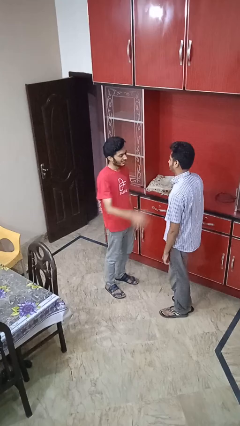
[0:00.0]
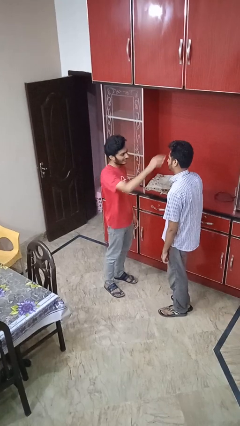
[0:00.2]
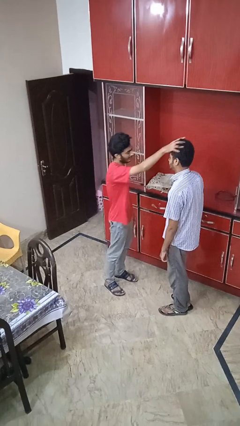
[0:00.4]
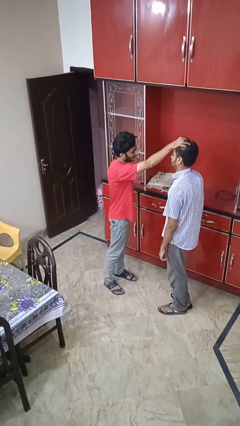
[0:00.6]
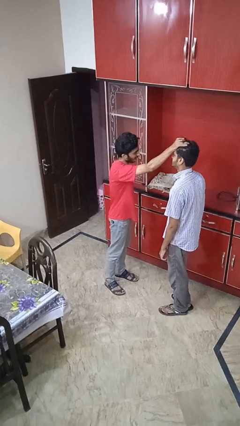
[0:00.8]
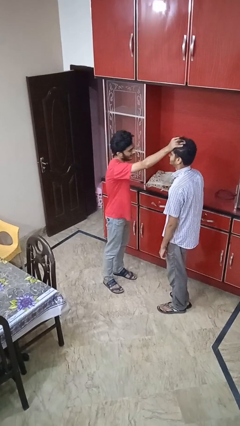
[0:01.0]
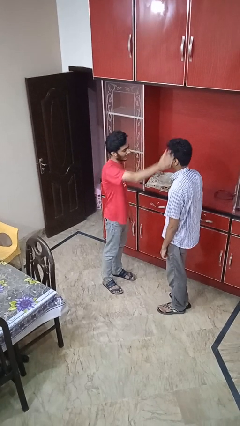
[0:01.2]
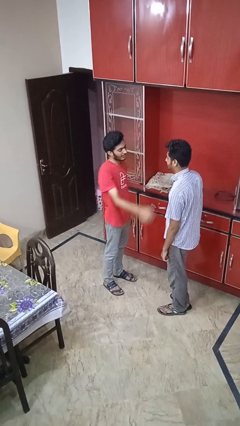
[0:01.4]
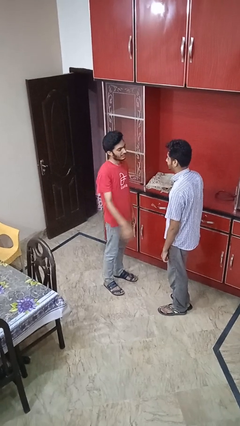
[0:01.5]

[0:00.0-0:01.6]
person grabs person by hair

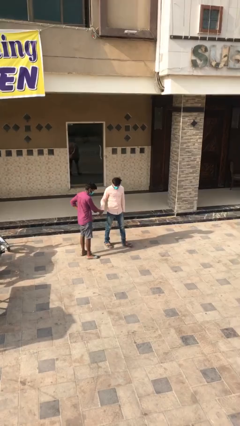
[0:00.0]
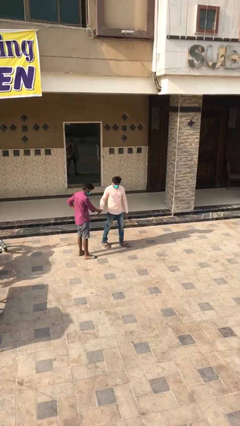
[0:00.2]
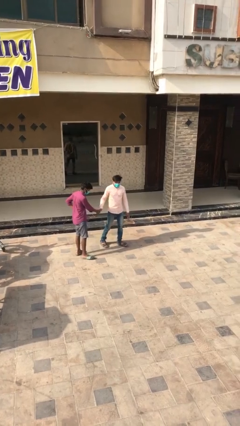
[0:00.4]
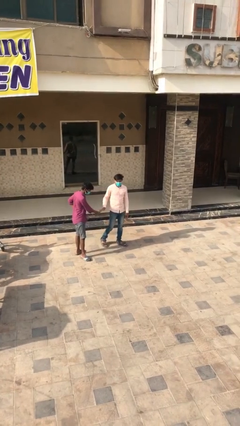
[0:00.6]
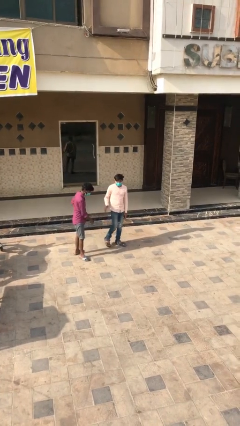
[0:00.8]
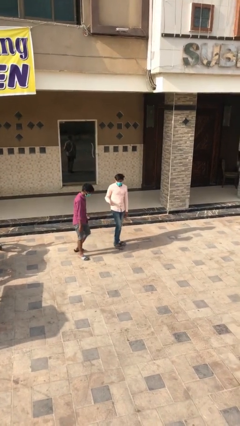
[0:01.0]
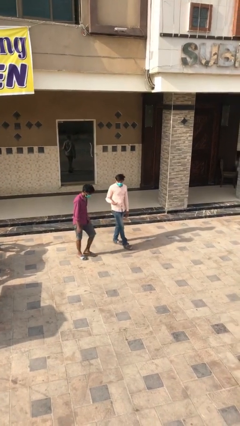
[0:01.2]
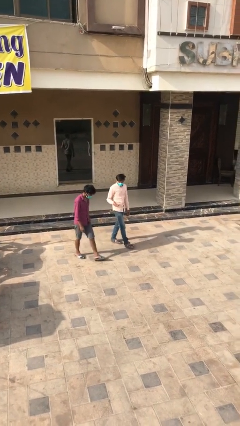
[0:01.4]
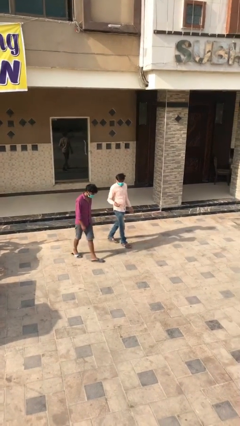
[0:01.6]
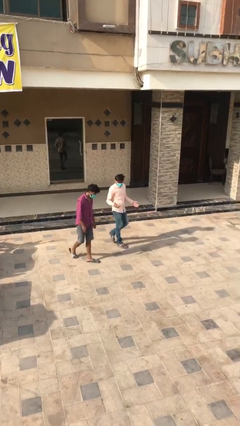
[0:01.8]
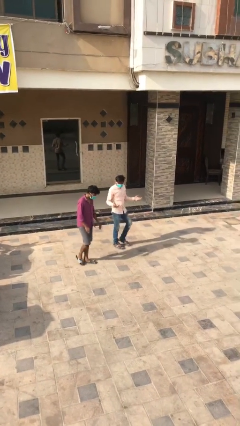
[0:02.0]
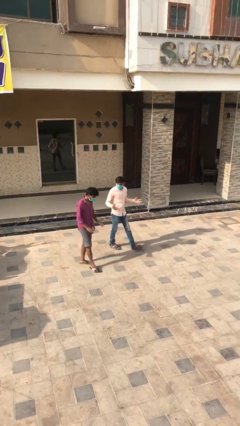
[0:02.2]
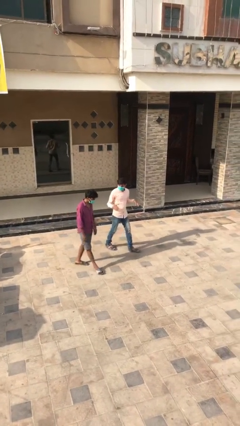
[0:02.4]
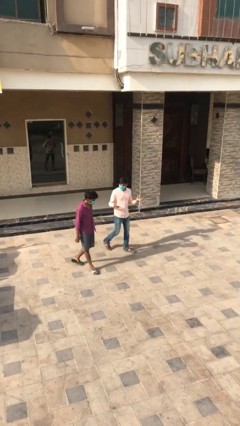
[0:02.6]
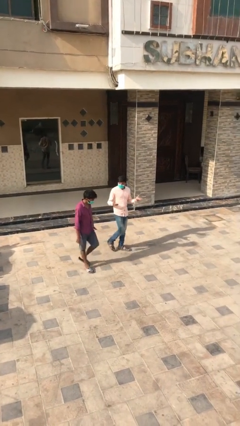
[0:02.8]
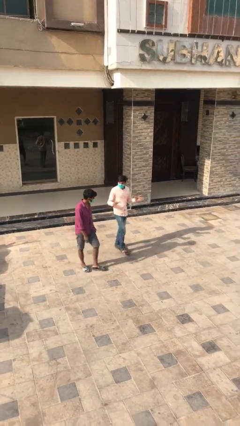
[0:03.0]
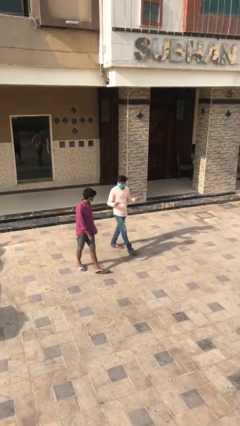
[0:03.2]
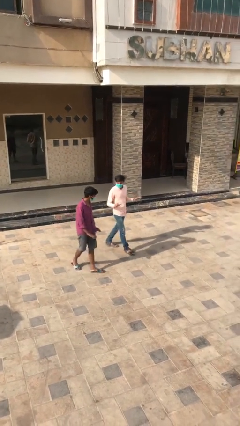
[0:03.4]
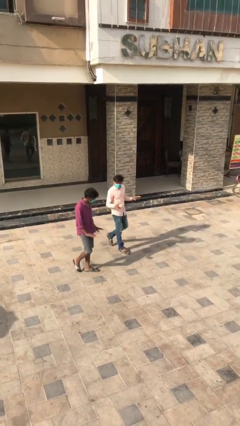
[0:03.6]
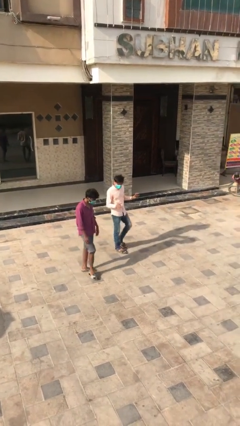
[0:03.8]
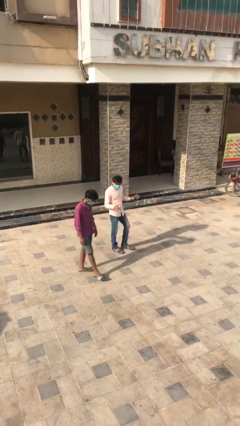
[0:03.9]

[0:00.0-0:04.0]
person talks to person

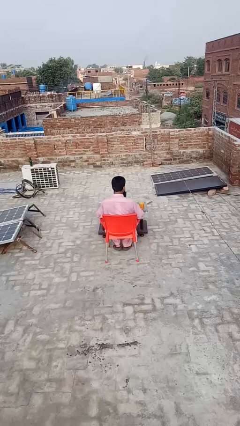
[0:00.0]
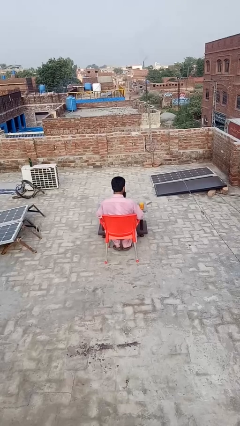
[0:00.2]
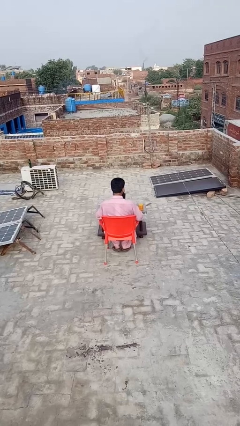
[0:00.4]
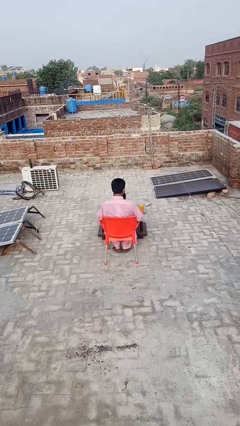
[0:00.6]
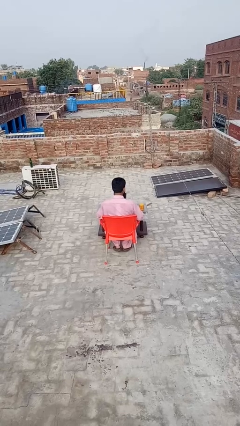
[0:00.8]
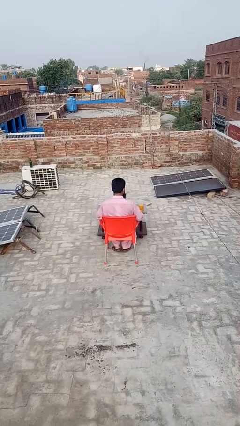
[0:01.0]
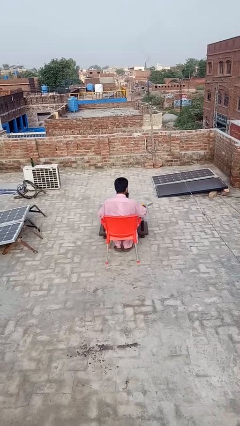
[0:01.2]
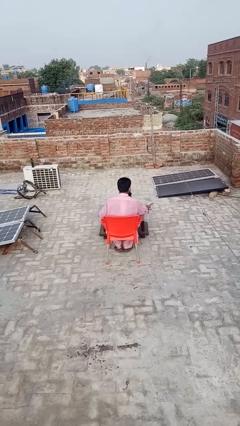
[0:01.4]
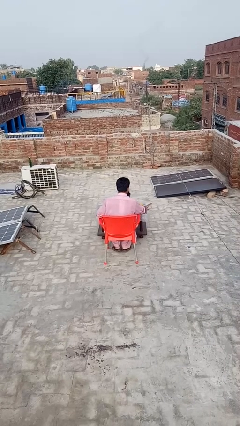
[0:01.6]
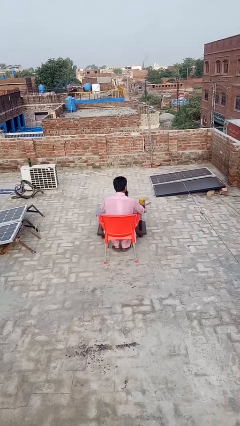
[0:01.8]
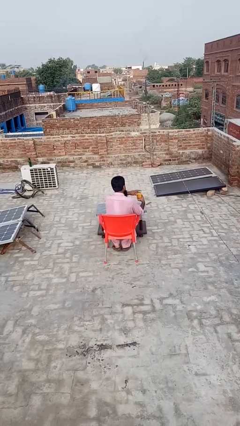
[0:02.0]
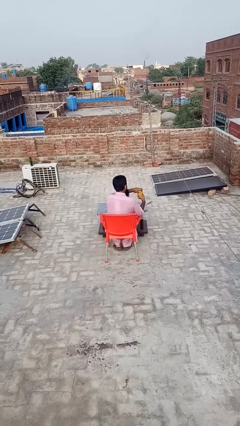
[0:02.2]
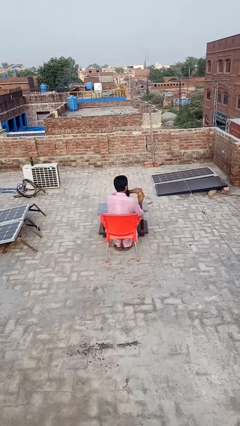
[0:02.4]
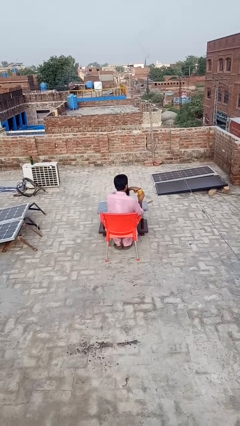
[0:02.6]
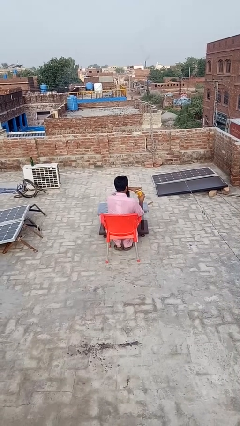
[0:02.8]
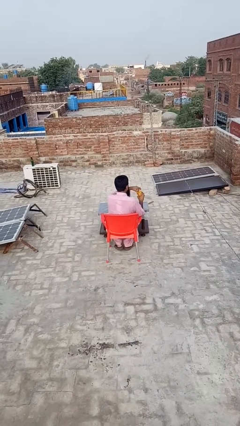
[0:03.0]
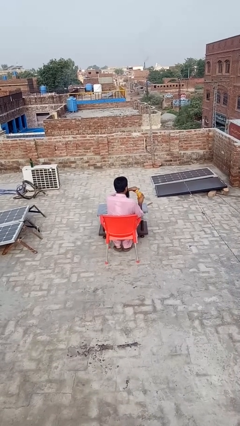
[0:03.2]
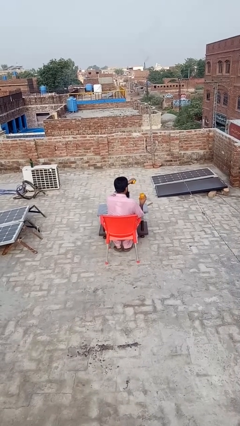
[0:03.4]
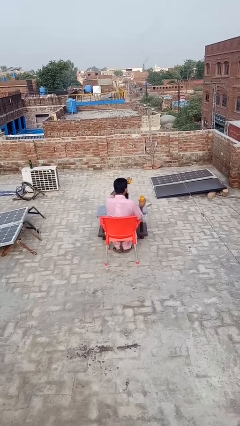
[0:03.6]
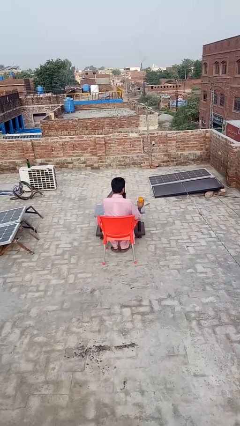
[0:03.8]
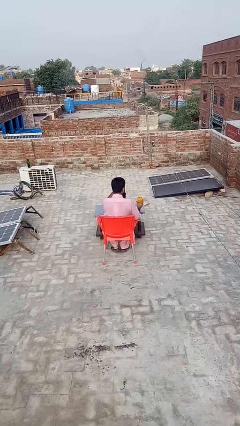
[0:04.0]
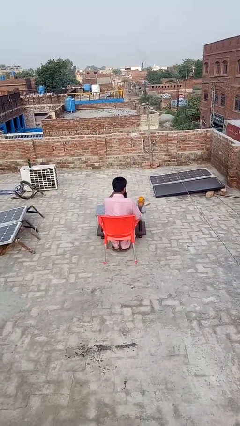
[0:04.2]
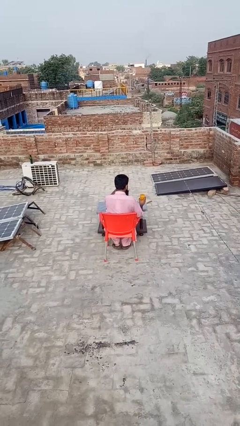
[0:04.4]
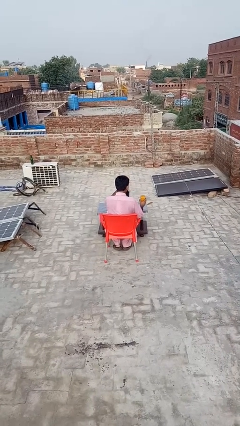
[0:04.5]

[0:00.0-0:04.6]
person opens jar

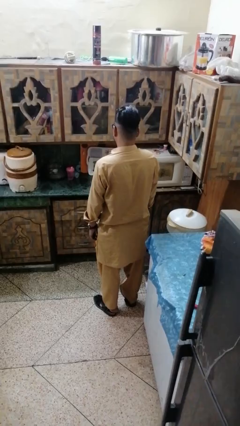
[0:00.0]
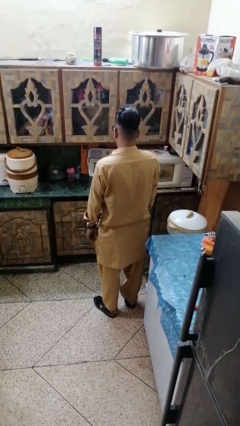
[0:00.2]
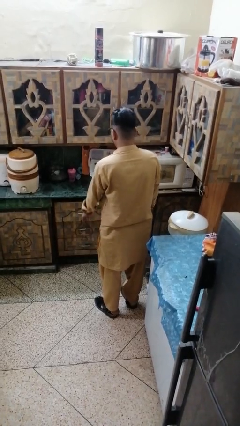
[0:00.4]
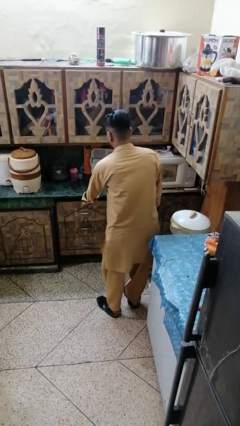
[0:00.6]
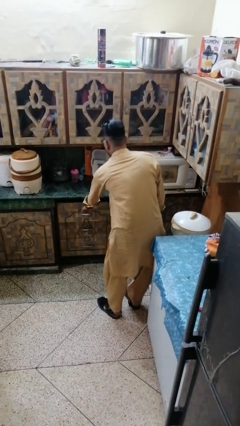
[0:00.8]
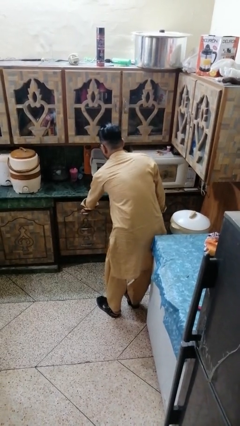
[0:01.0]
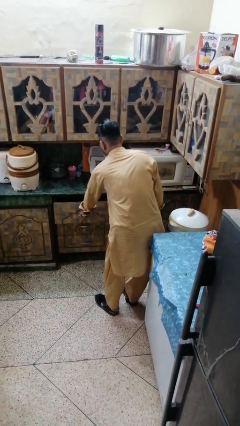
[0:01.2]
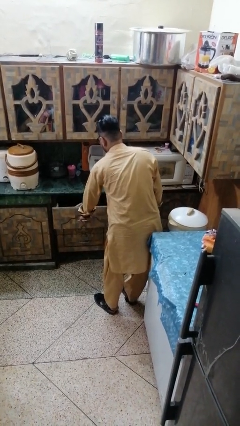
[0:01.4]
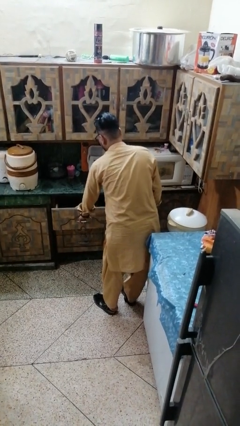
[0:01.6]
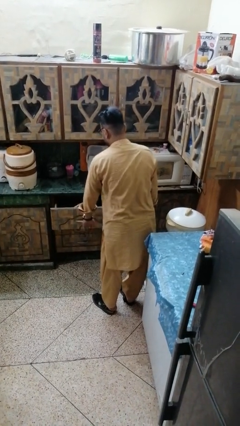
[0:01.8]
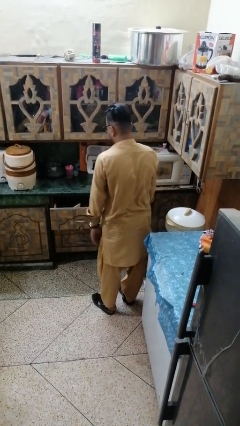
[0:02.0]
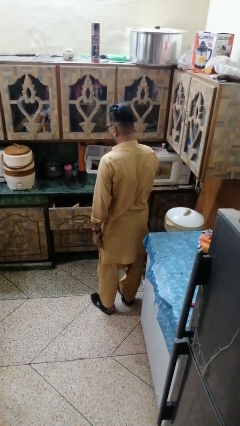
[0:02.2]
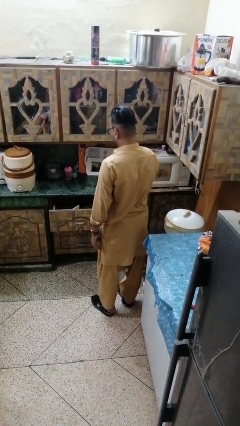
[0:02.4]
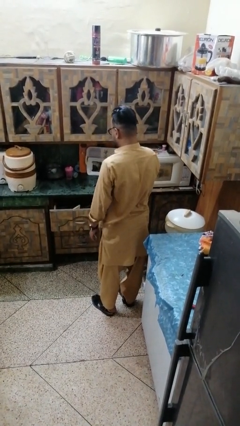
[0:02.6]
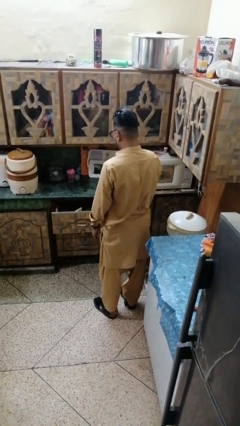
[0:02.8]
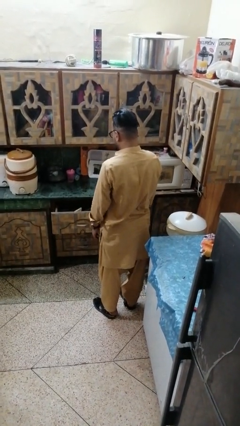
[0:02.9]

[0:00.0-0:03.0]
person opens kitchen drawer

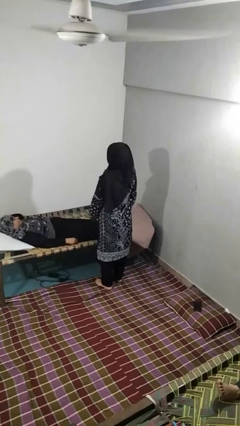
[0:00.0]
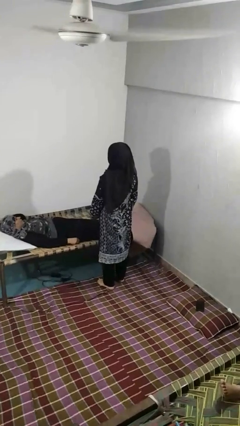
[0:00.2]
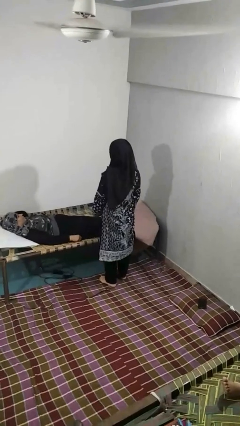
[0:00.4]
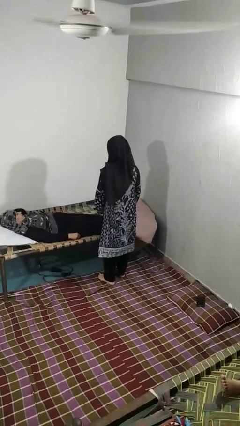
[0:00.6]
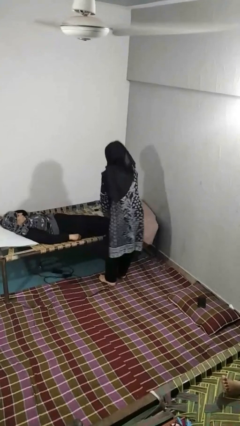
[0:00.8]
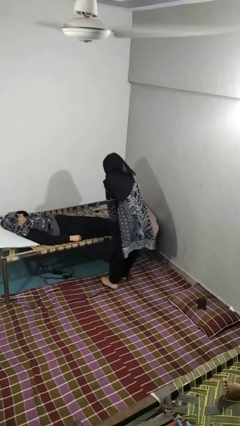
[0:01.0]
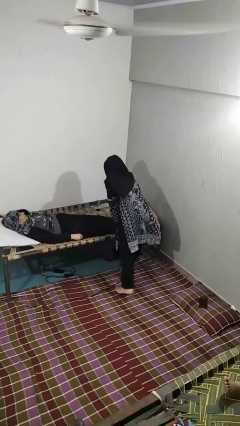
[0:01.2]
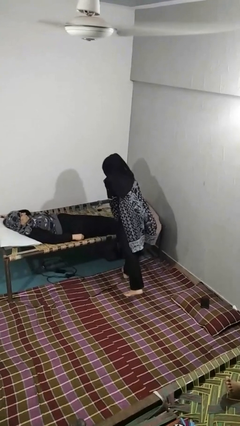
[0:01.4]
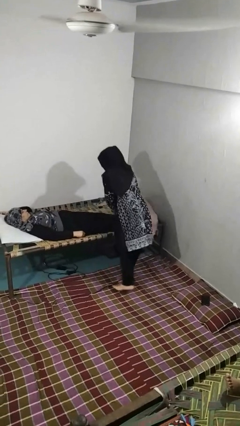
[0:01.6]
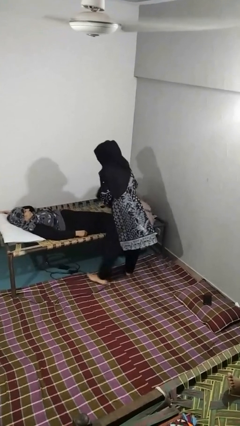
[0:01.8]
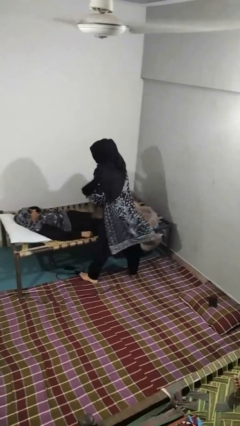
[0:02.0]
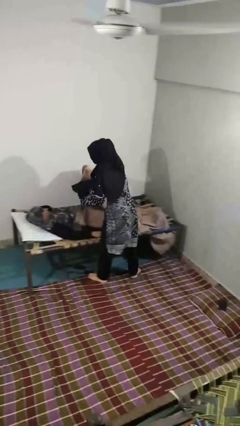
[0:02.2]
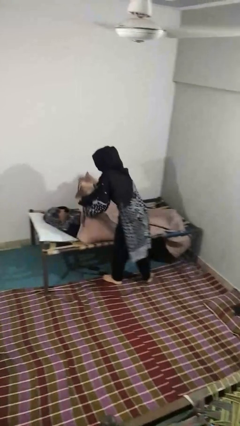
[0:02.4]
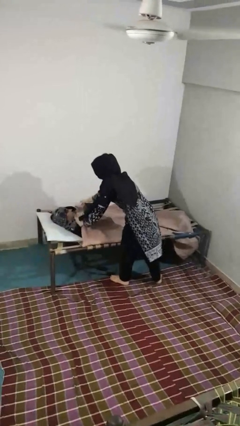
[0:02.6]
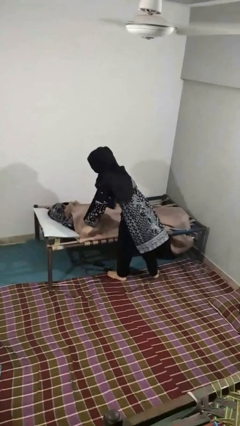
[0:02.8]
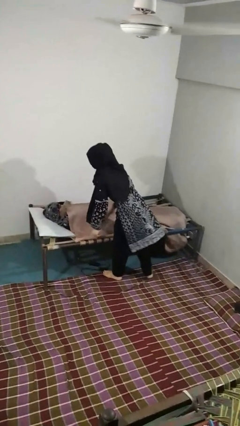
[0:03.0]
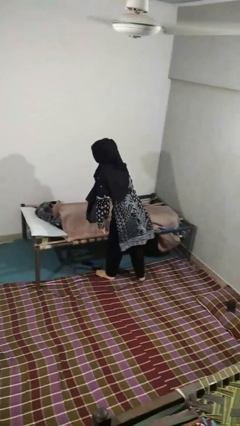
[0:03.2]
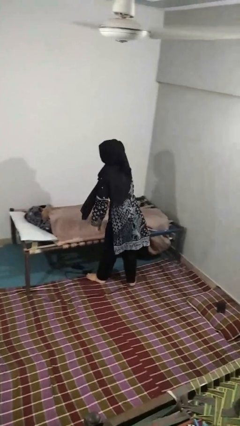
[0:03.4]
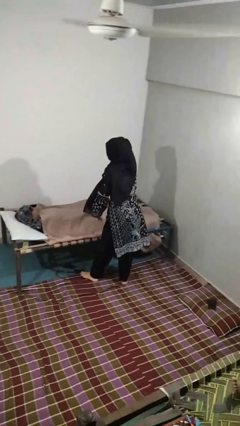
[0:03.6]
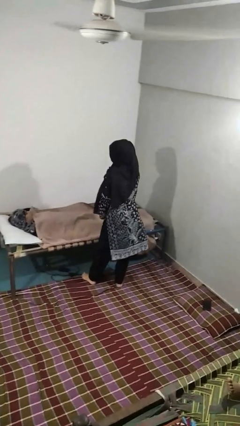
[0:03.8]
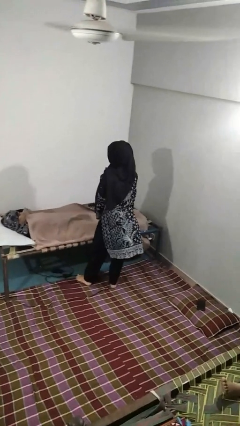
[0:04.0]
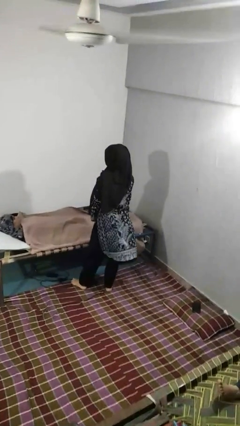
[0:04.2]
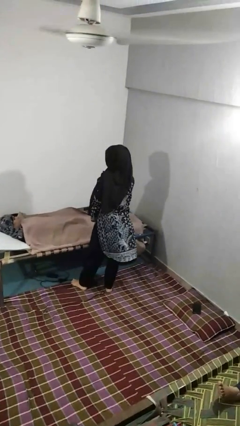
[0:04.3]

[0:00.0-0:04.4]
person covers friend with blanket
